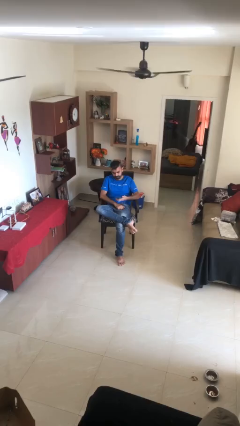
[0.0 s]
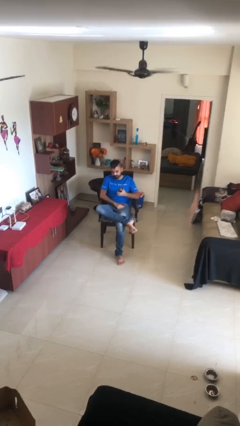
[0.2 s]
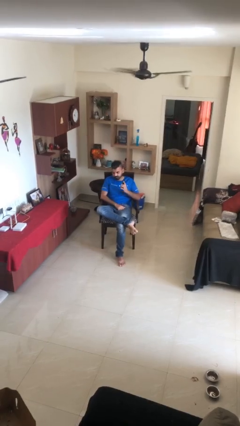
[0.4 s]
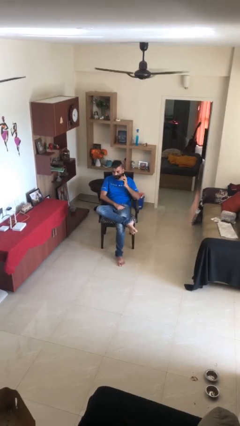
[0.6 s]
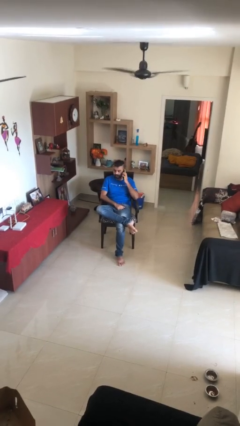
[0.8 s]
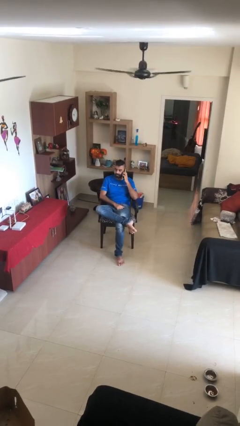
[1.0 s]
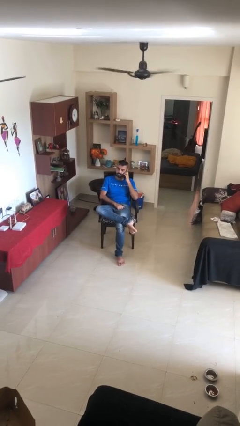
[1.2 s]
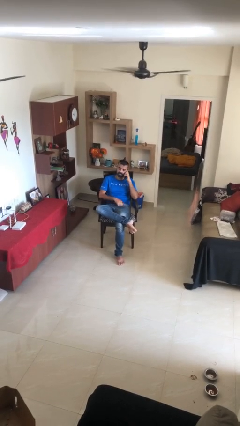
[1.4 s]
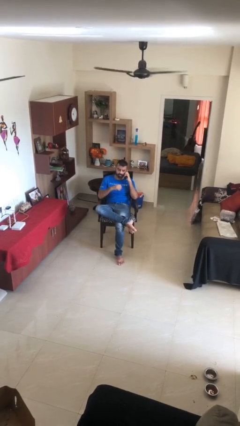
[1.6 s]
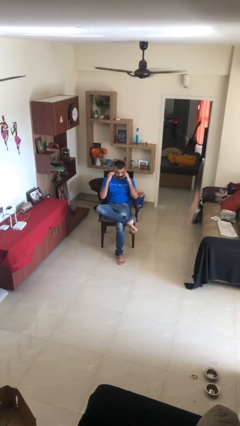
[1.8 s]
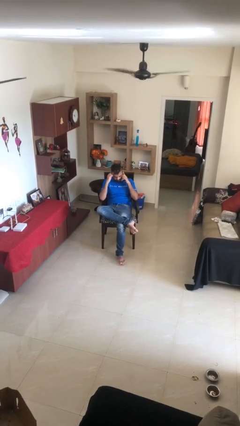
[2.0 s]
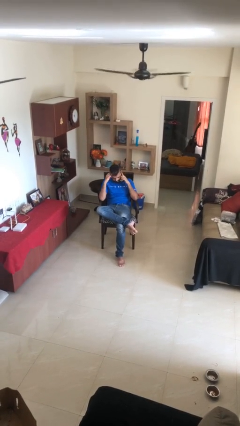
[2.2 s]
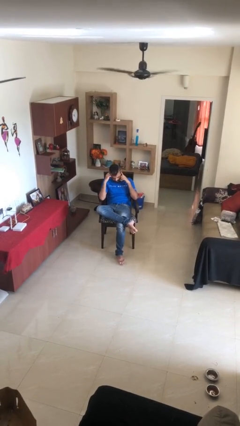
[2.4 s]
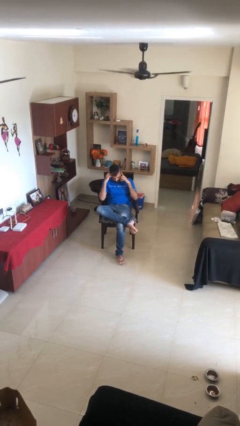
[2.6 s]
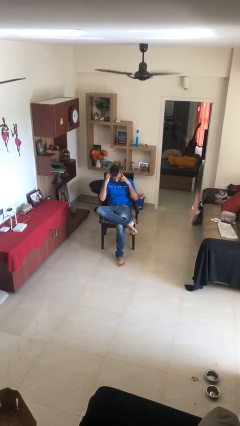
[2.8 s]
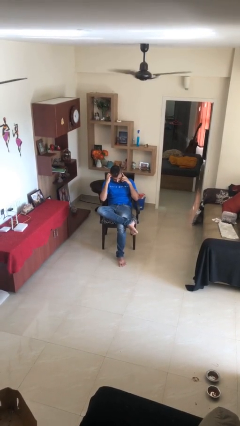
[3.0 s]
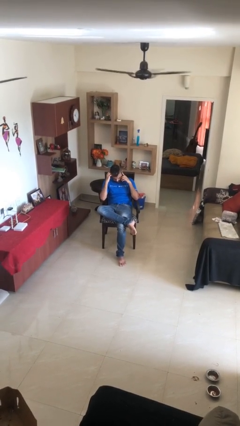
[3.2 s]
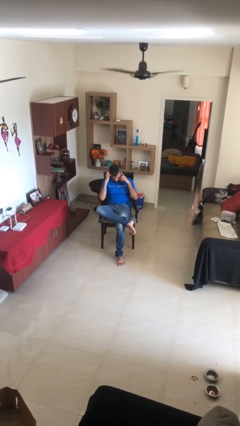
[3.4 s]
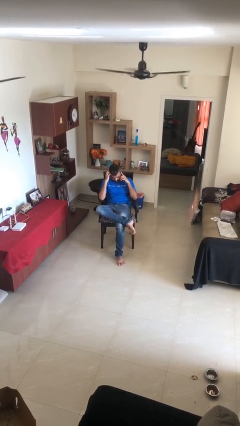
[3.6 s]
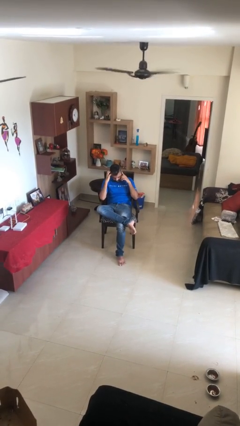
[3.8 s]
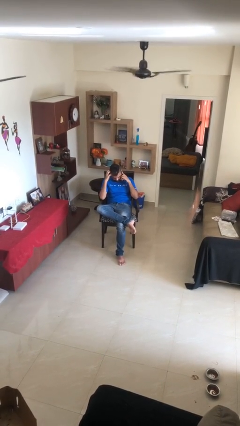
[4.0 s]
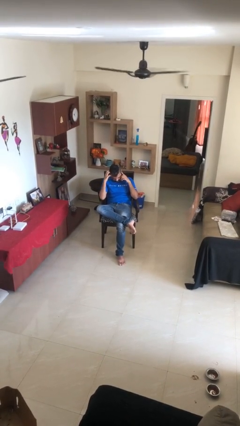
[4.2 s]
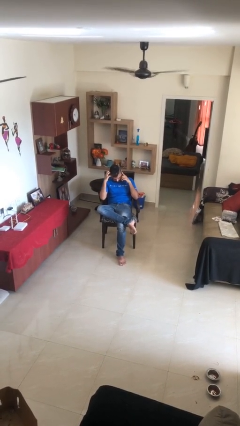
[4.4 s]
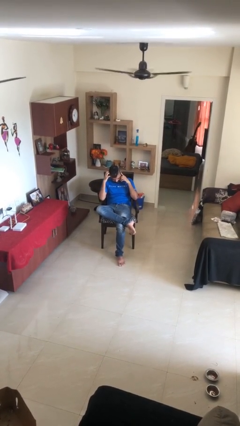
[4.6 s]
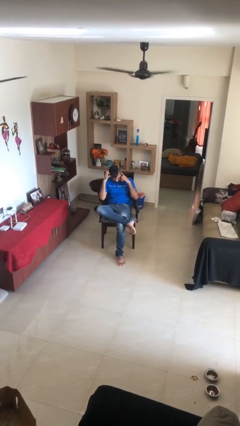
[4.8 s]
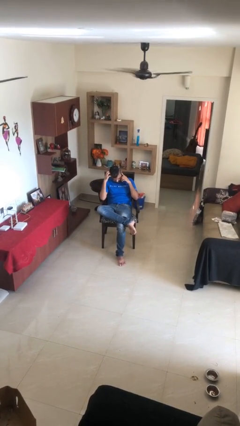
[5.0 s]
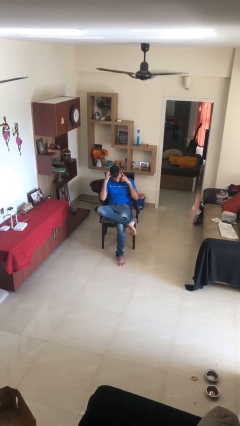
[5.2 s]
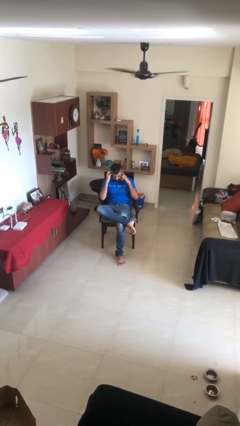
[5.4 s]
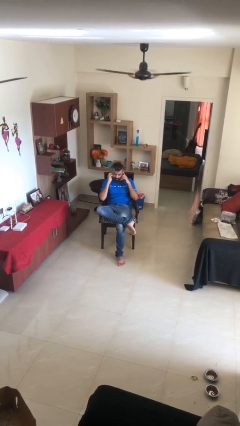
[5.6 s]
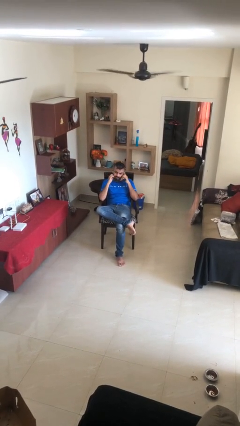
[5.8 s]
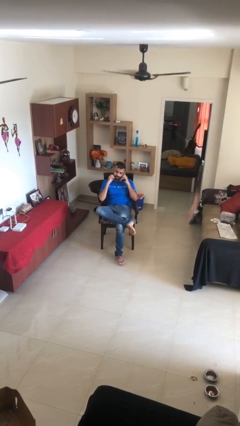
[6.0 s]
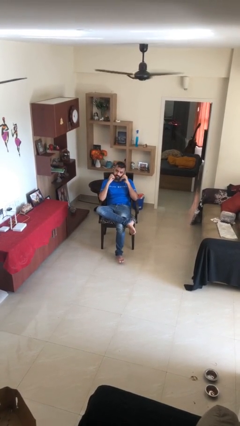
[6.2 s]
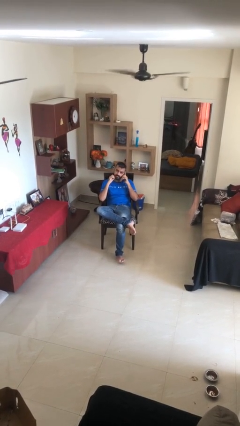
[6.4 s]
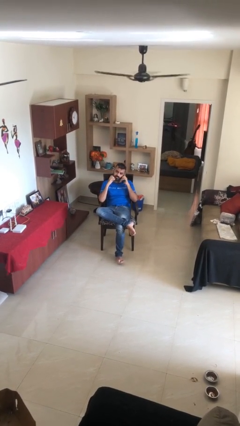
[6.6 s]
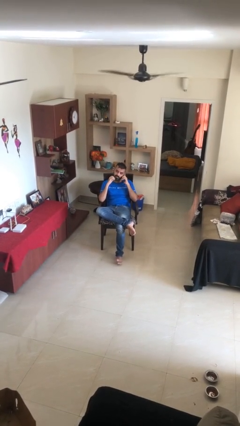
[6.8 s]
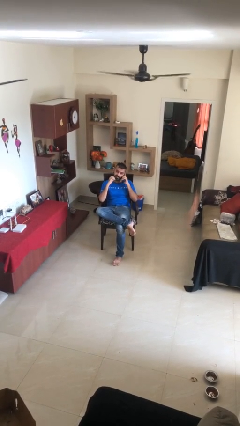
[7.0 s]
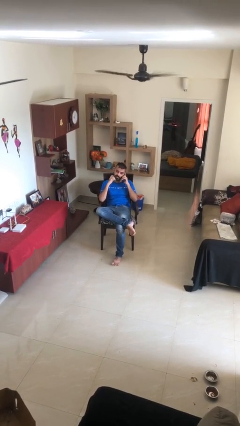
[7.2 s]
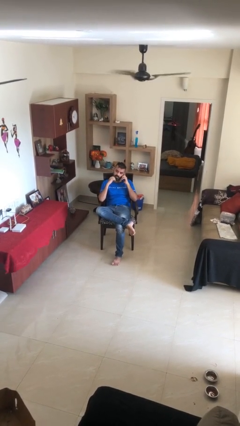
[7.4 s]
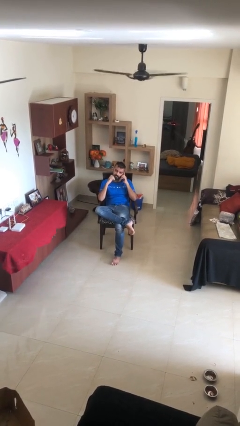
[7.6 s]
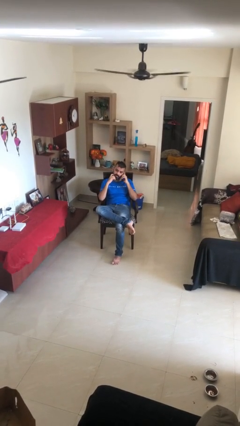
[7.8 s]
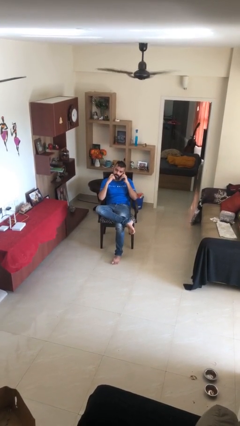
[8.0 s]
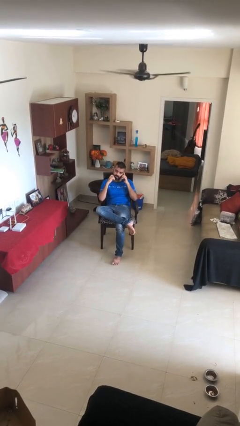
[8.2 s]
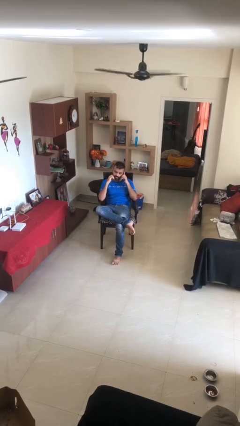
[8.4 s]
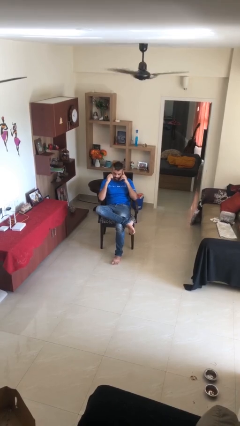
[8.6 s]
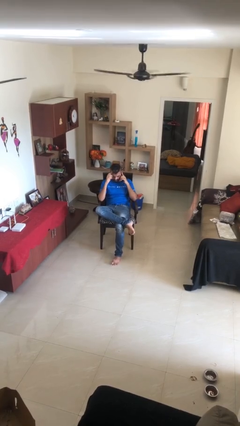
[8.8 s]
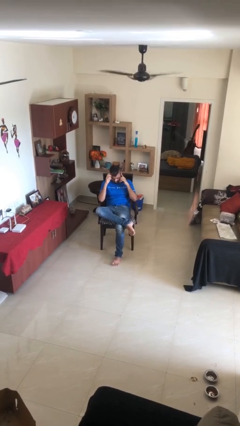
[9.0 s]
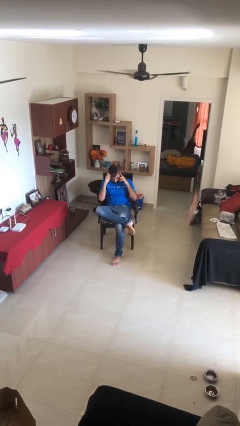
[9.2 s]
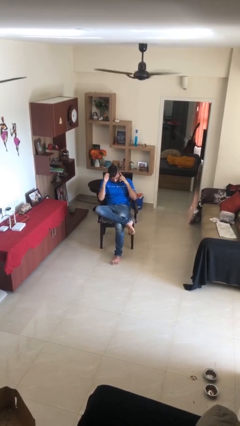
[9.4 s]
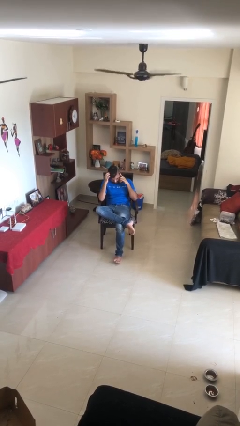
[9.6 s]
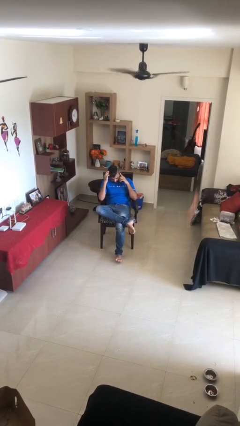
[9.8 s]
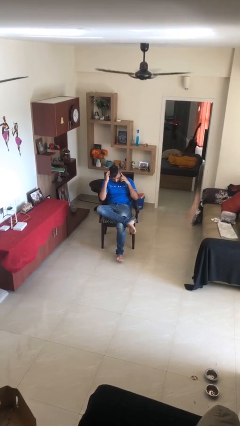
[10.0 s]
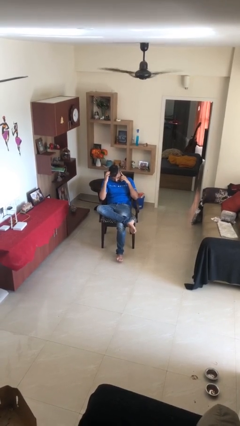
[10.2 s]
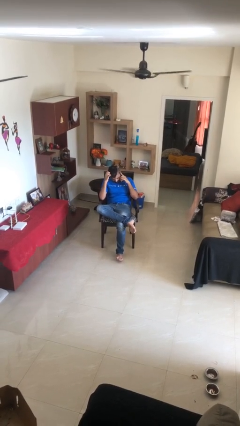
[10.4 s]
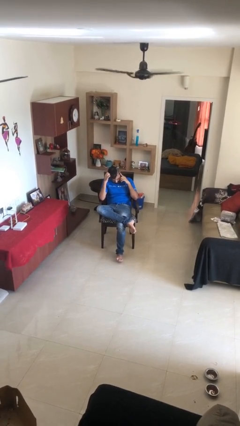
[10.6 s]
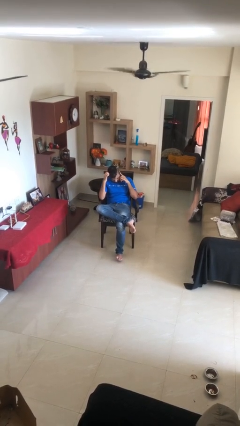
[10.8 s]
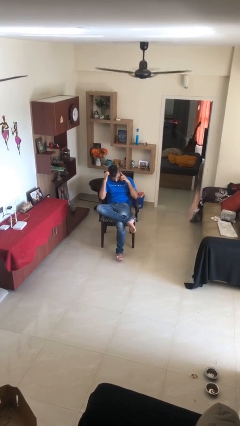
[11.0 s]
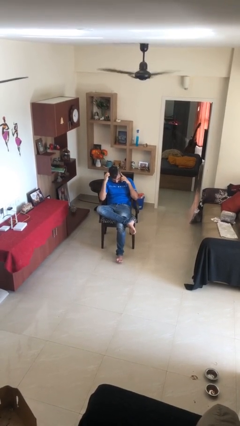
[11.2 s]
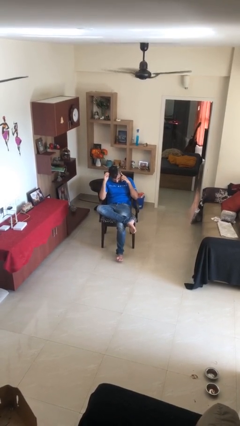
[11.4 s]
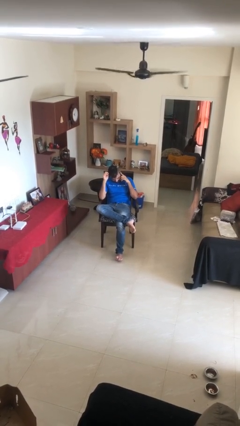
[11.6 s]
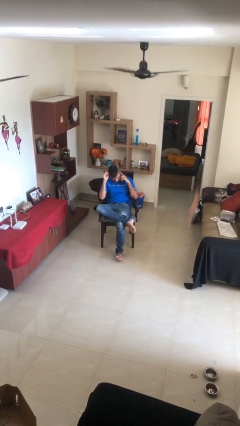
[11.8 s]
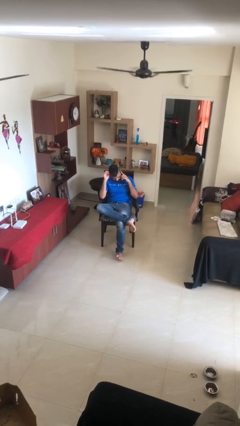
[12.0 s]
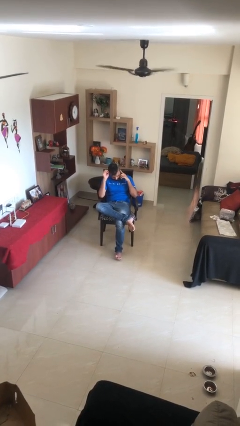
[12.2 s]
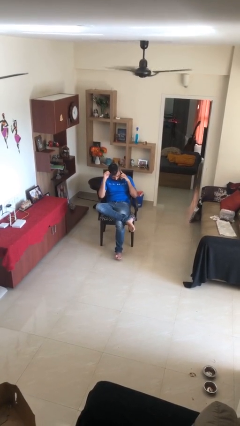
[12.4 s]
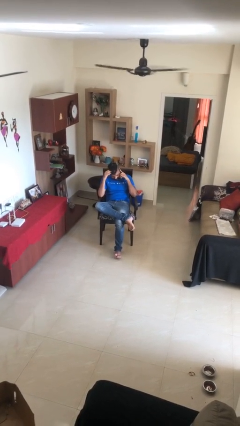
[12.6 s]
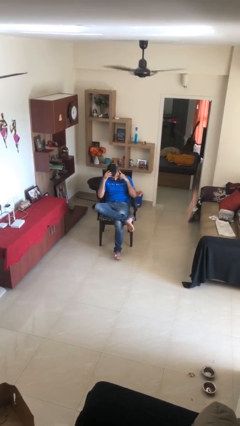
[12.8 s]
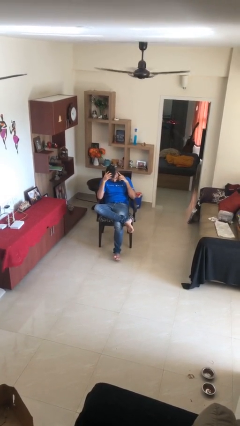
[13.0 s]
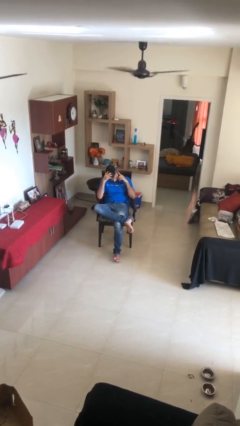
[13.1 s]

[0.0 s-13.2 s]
person talks on phone

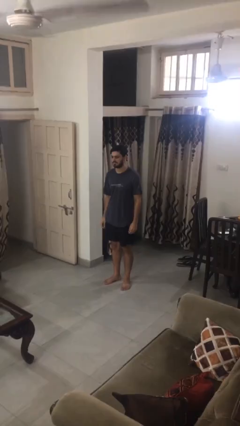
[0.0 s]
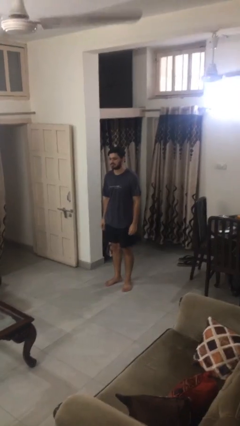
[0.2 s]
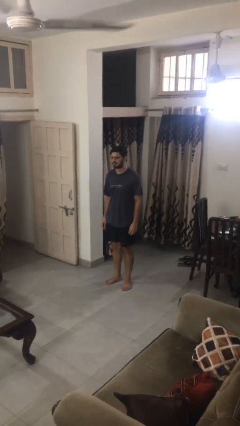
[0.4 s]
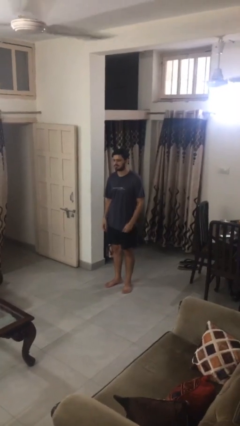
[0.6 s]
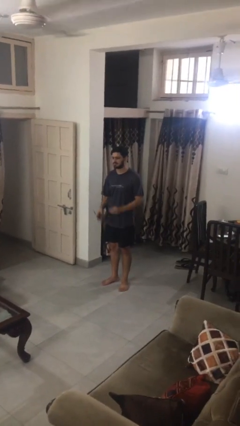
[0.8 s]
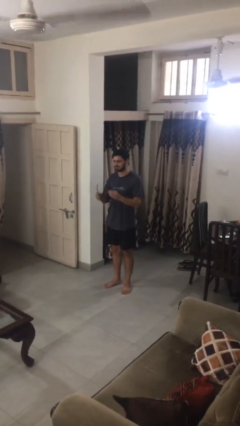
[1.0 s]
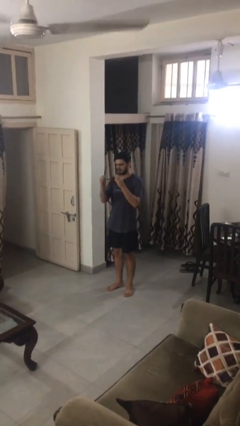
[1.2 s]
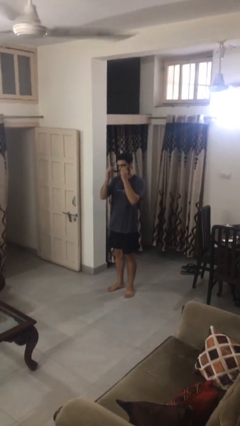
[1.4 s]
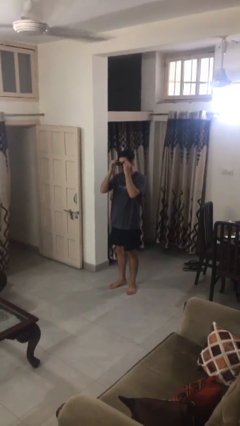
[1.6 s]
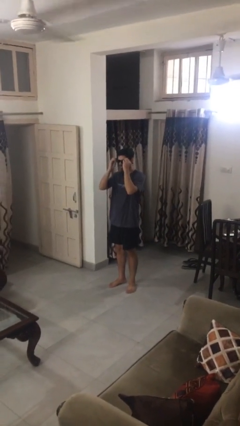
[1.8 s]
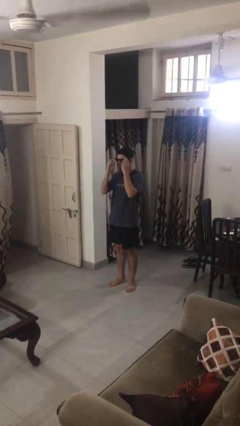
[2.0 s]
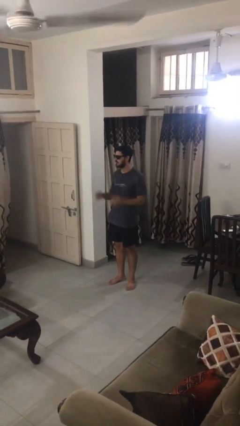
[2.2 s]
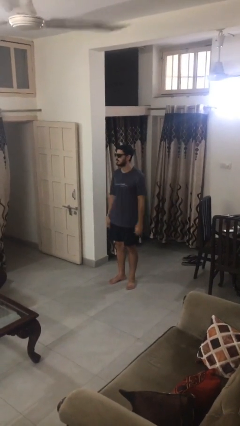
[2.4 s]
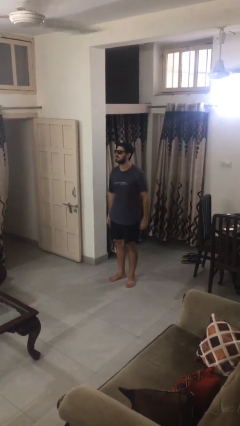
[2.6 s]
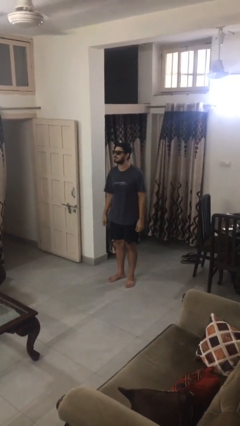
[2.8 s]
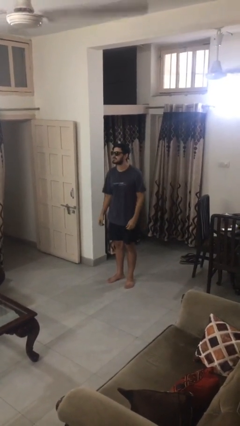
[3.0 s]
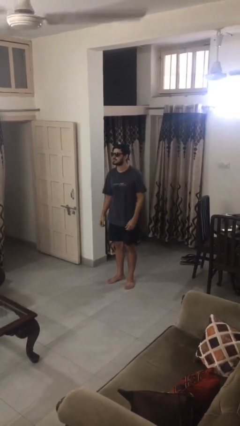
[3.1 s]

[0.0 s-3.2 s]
person puts on sunglasses

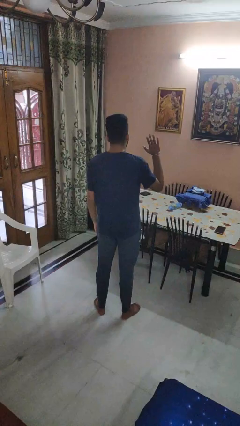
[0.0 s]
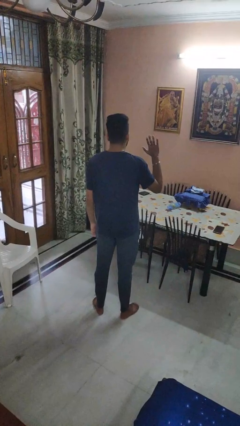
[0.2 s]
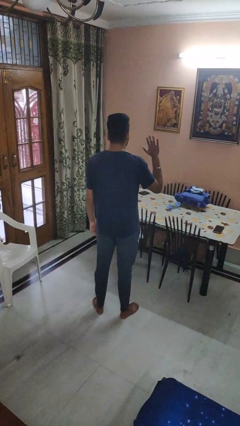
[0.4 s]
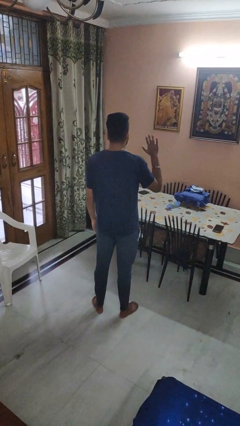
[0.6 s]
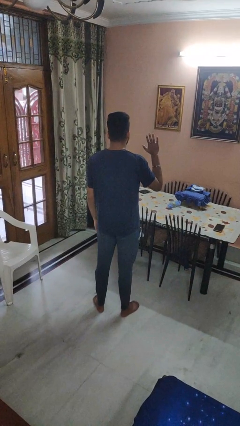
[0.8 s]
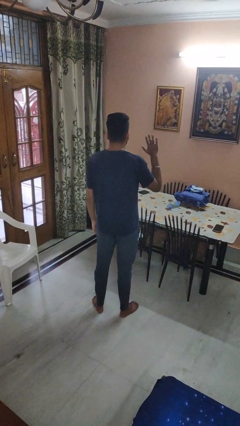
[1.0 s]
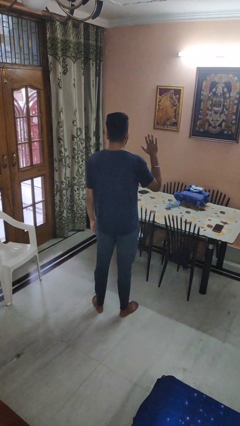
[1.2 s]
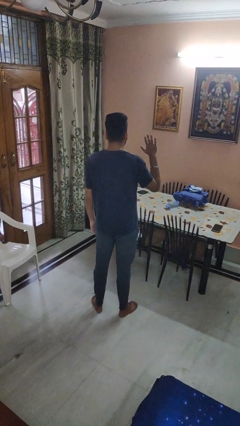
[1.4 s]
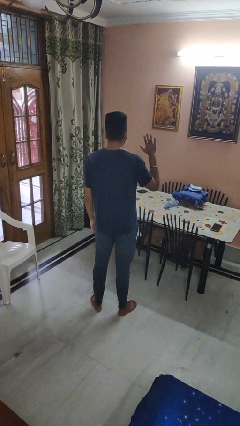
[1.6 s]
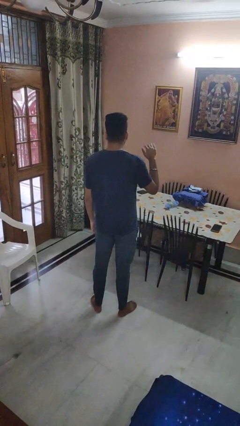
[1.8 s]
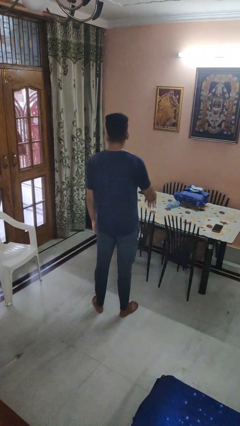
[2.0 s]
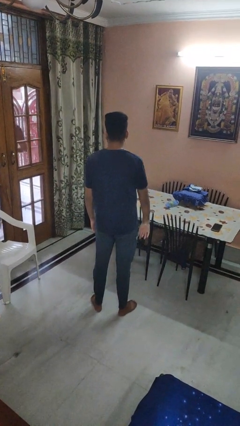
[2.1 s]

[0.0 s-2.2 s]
person gestures number five
